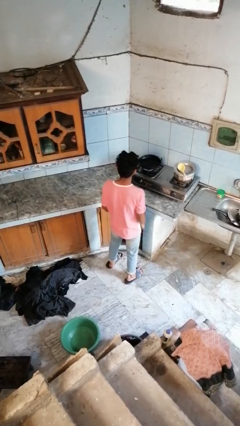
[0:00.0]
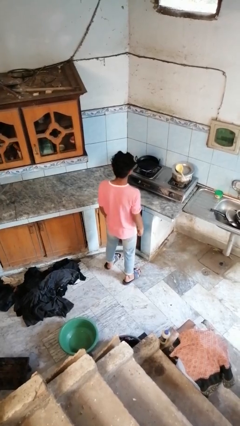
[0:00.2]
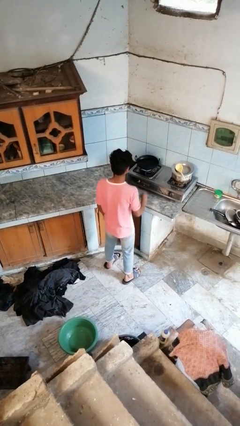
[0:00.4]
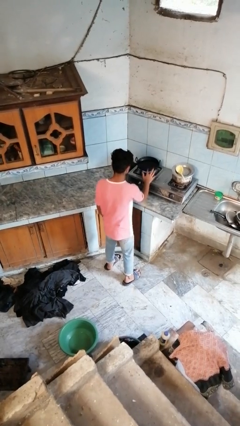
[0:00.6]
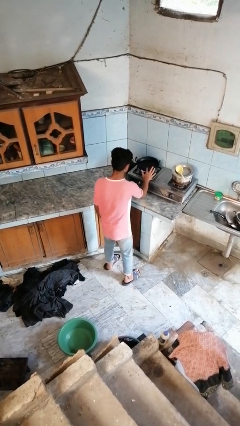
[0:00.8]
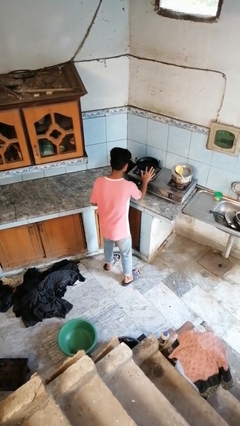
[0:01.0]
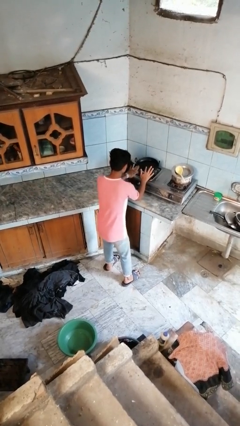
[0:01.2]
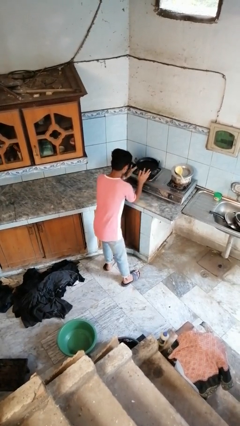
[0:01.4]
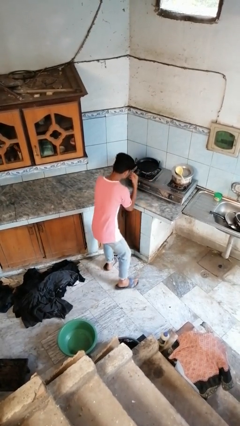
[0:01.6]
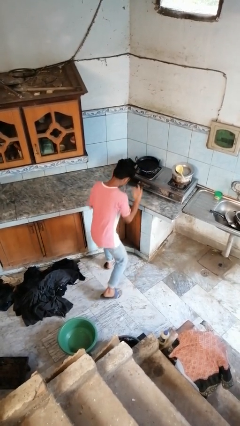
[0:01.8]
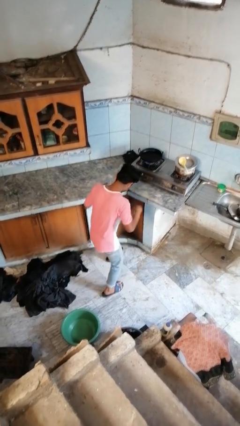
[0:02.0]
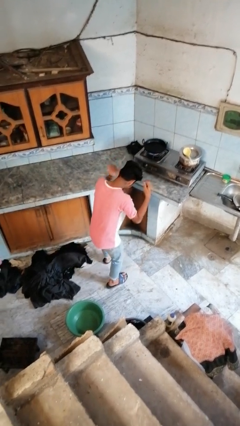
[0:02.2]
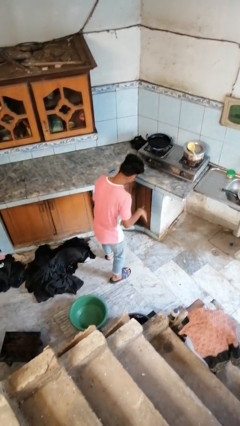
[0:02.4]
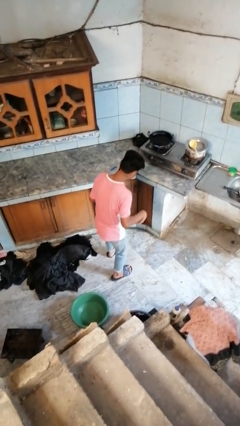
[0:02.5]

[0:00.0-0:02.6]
person burns hand

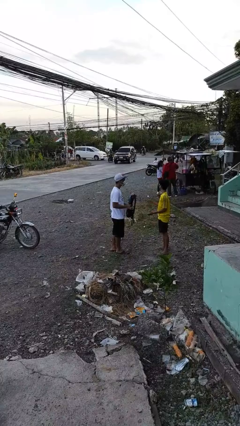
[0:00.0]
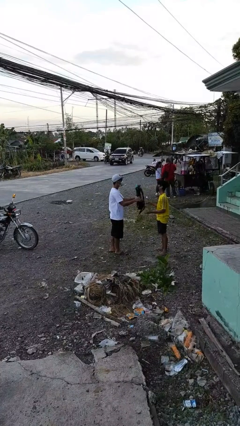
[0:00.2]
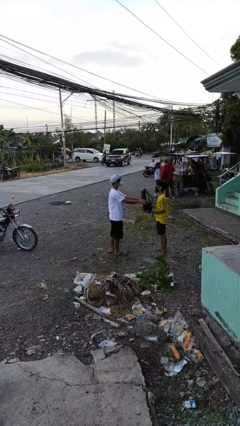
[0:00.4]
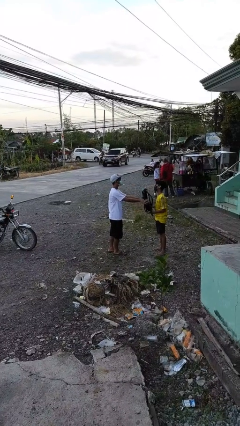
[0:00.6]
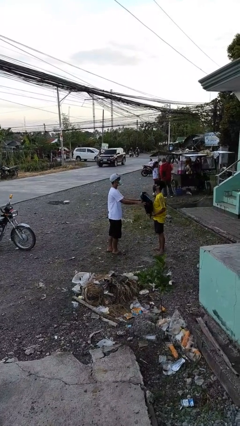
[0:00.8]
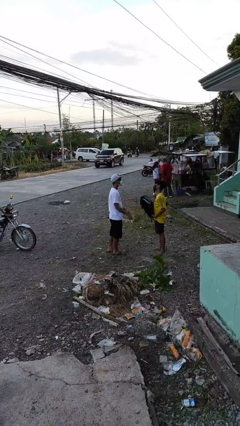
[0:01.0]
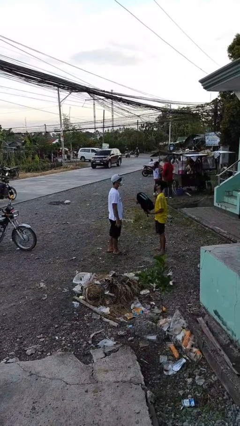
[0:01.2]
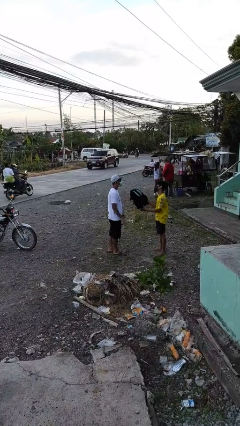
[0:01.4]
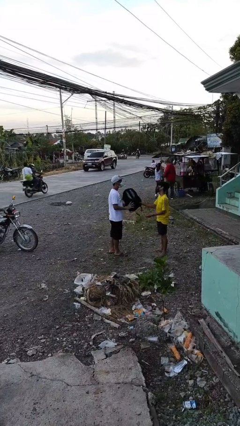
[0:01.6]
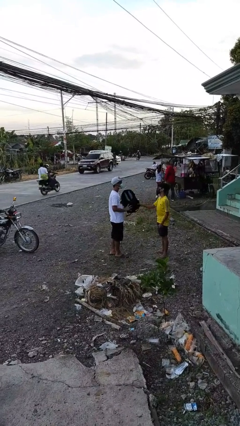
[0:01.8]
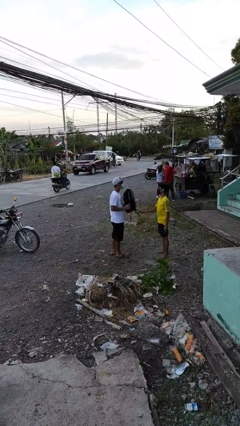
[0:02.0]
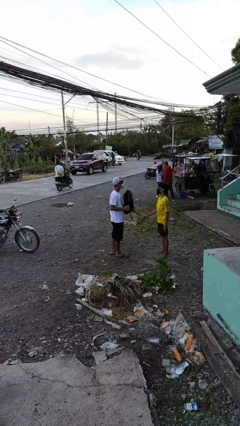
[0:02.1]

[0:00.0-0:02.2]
person transfers object to person

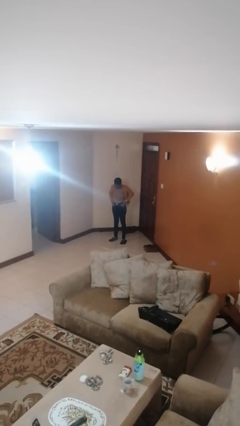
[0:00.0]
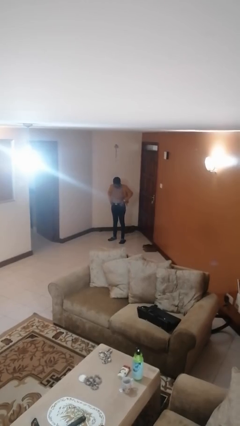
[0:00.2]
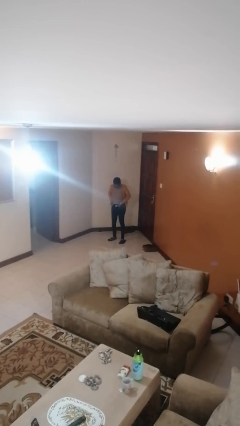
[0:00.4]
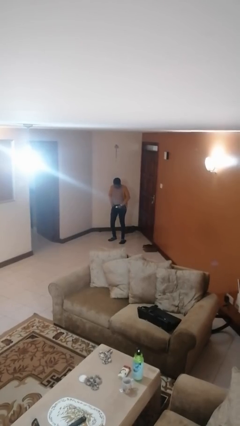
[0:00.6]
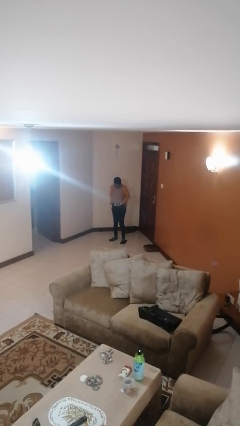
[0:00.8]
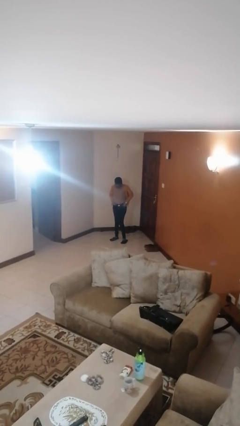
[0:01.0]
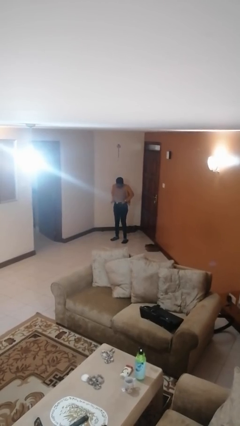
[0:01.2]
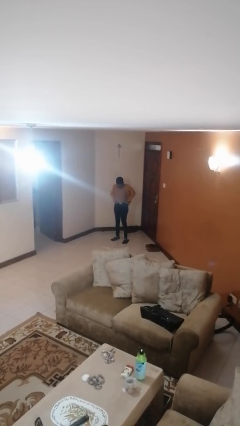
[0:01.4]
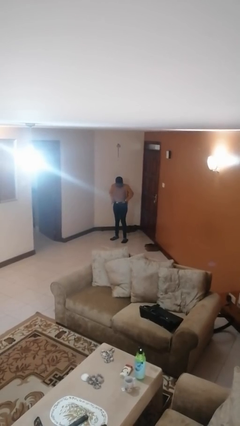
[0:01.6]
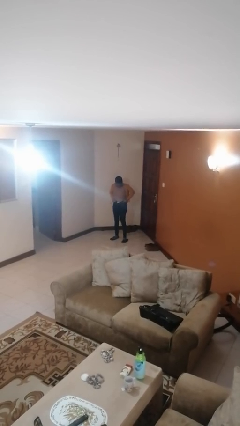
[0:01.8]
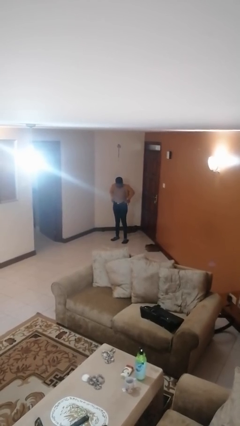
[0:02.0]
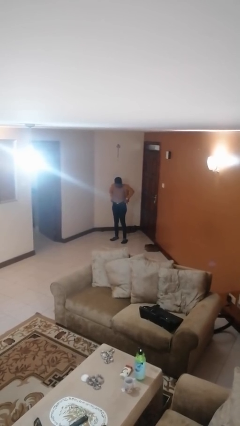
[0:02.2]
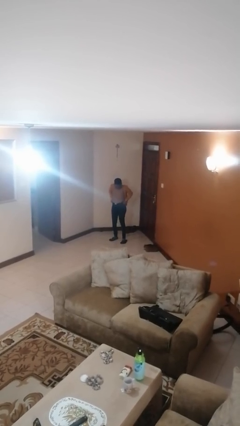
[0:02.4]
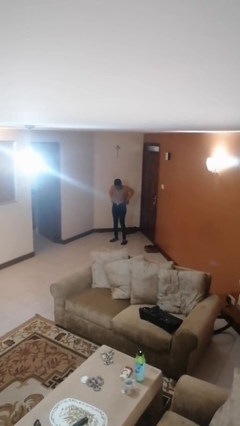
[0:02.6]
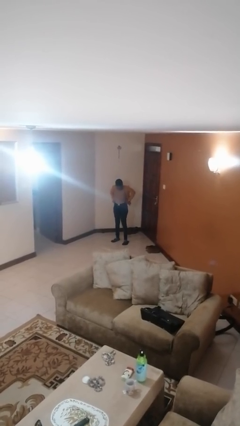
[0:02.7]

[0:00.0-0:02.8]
person hikes up pants

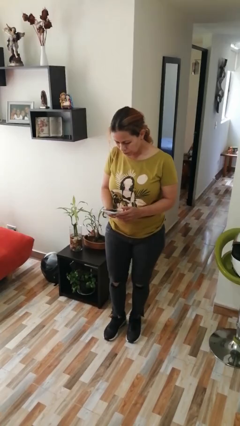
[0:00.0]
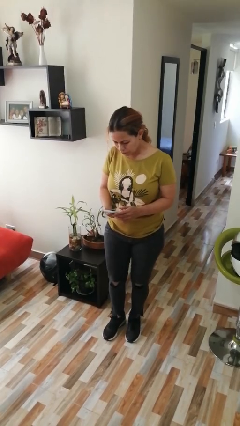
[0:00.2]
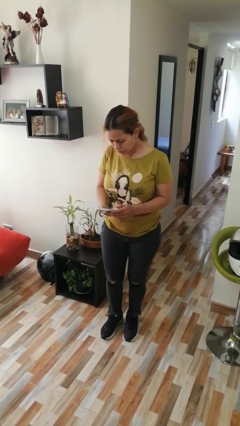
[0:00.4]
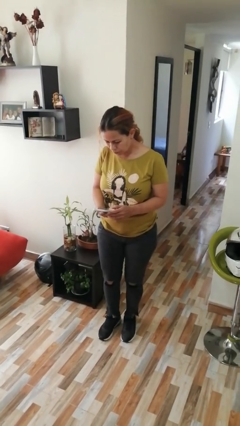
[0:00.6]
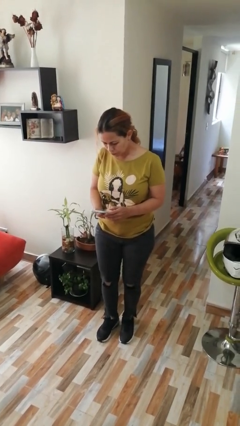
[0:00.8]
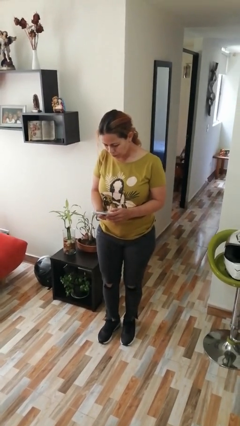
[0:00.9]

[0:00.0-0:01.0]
person puts phone into pocket

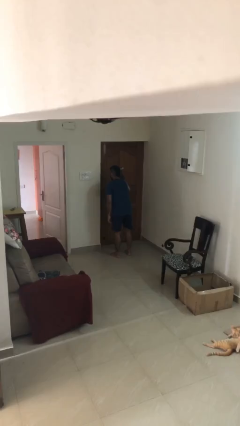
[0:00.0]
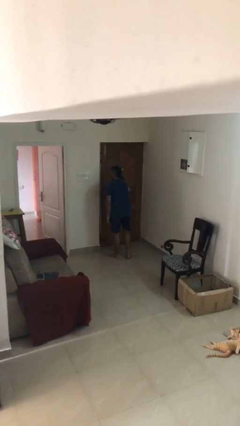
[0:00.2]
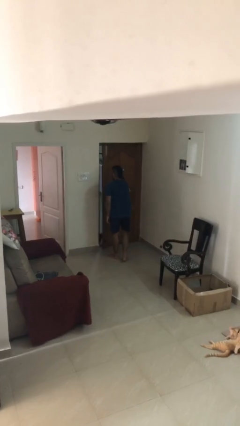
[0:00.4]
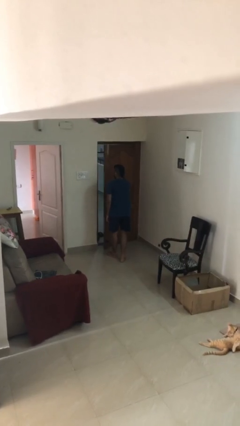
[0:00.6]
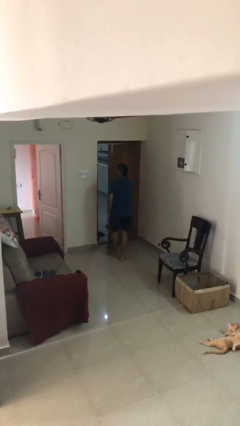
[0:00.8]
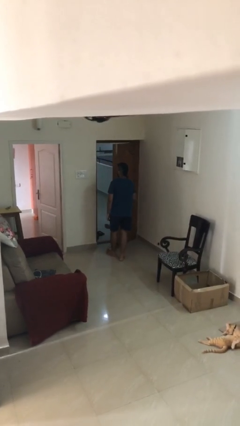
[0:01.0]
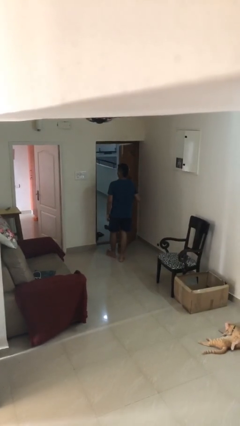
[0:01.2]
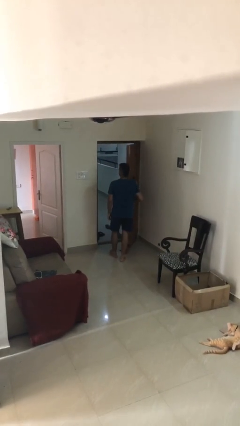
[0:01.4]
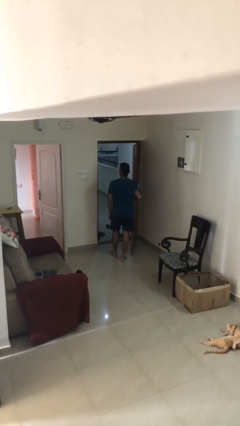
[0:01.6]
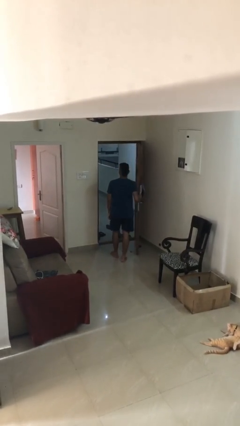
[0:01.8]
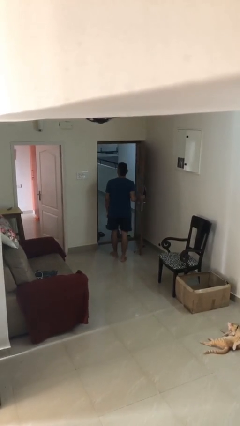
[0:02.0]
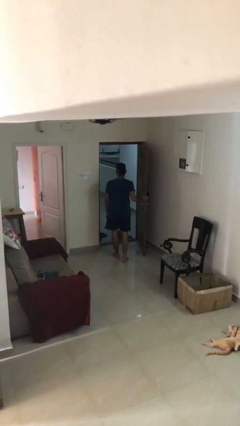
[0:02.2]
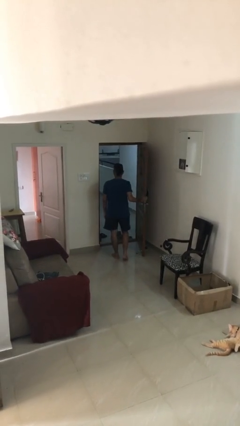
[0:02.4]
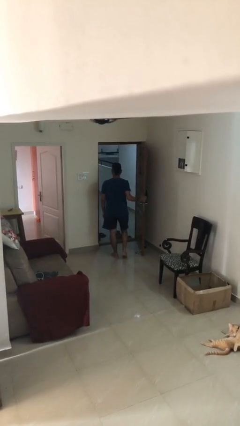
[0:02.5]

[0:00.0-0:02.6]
person opens facility door

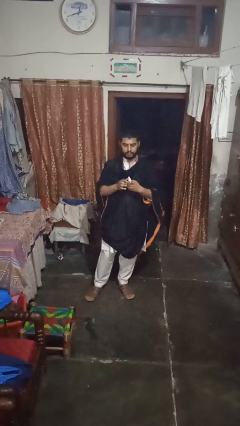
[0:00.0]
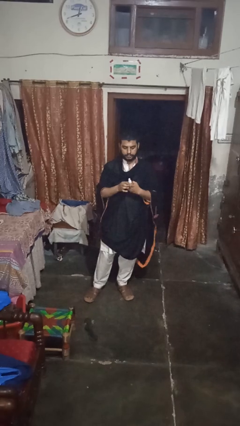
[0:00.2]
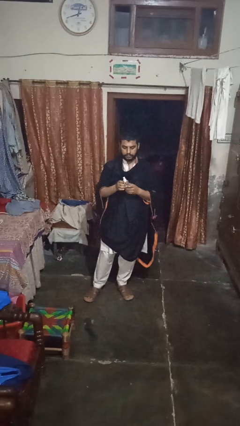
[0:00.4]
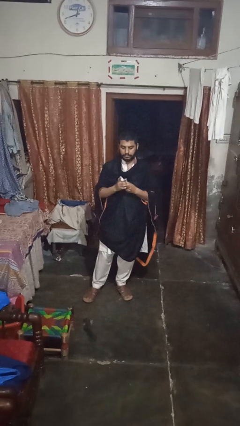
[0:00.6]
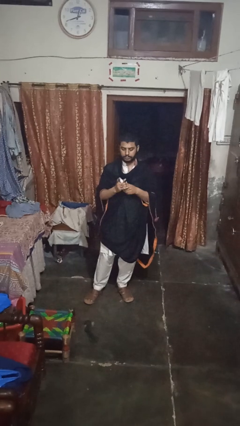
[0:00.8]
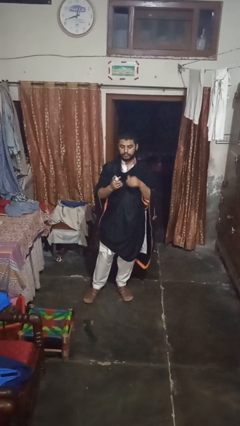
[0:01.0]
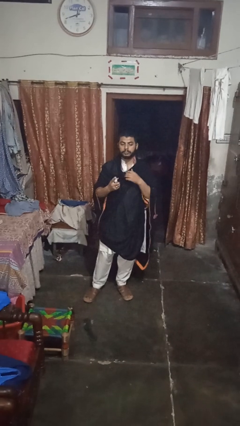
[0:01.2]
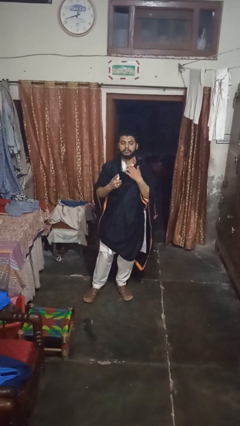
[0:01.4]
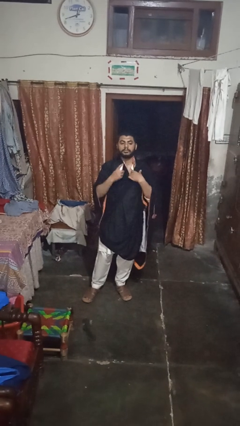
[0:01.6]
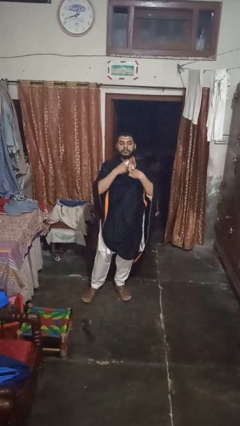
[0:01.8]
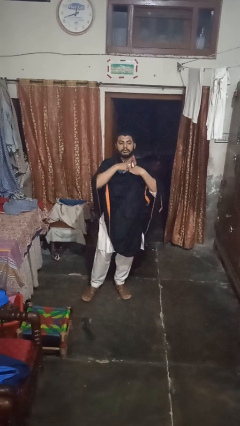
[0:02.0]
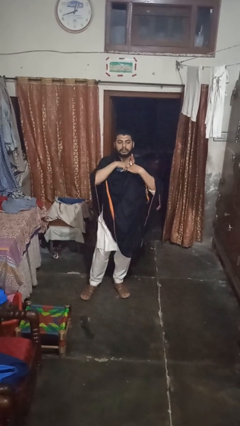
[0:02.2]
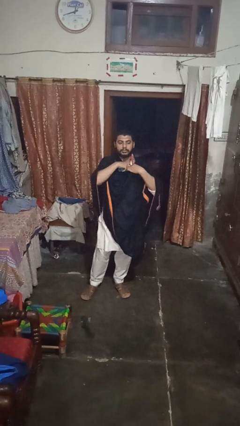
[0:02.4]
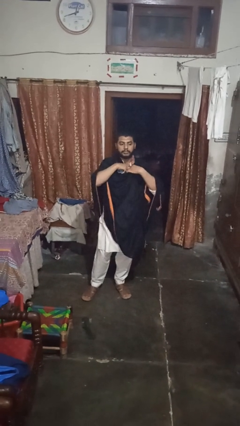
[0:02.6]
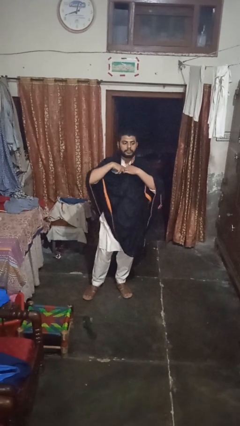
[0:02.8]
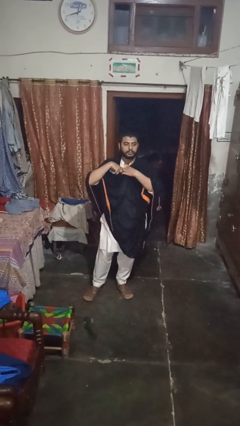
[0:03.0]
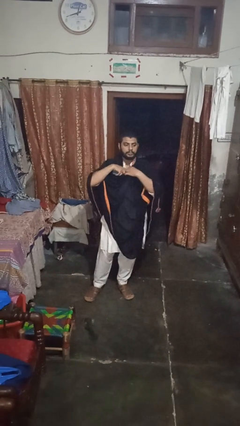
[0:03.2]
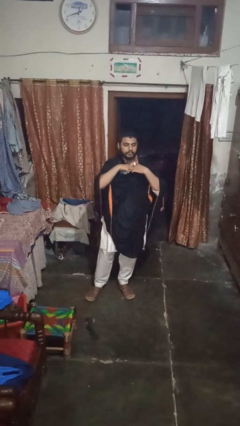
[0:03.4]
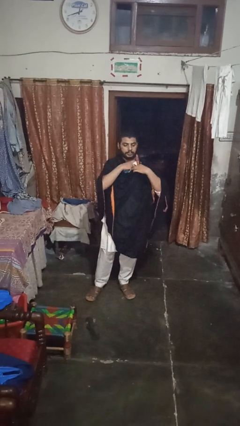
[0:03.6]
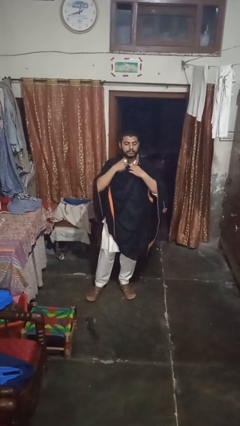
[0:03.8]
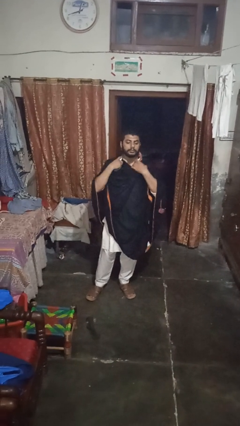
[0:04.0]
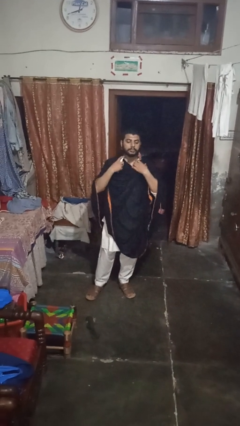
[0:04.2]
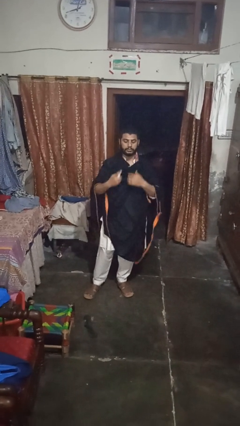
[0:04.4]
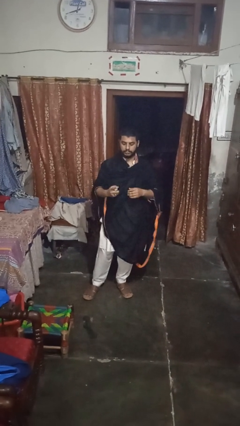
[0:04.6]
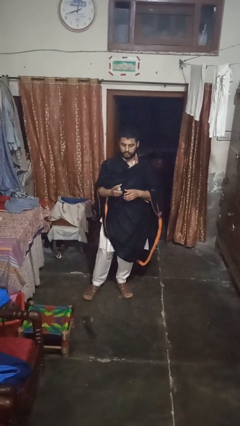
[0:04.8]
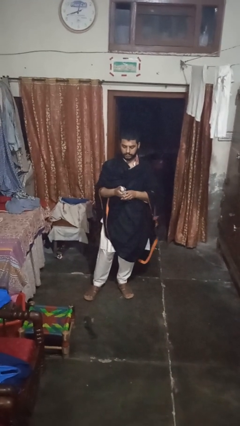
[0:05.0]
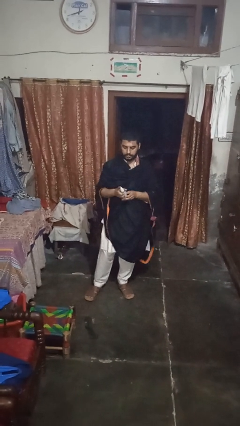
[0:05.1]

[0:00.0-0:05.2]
person applies deodorant

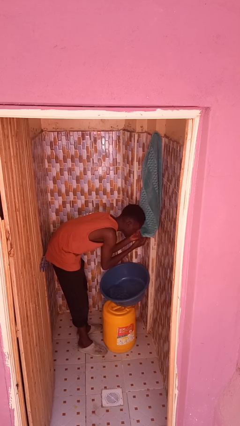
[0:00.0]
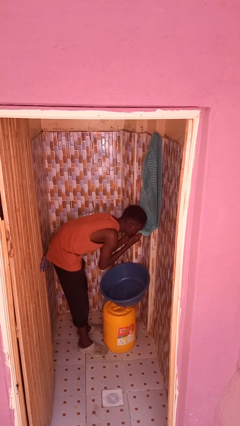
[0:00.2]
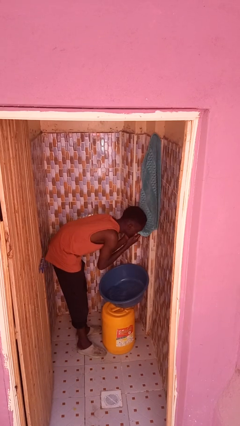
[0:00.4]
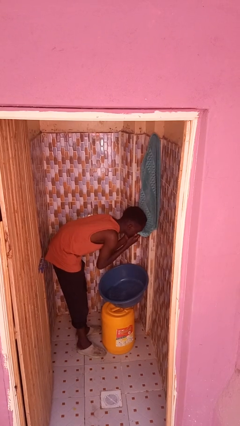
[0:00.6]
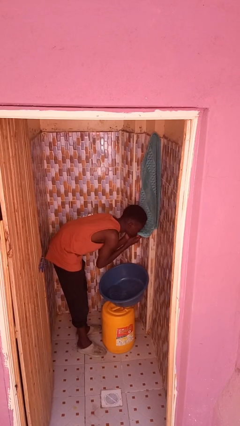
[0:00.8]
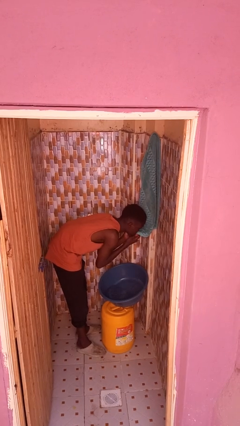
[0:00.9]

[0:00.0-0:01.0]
person dries face with towel
